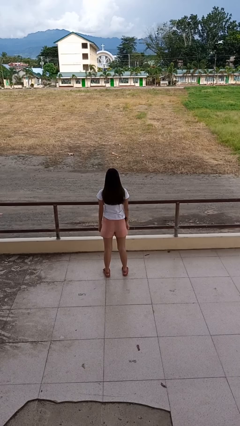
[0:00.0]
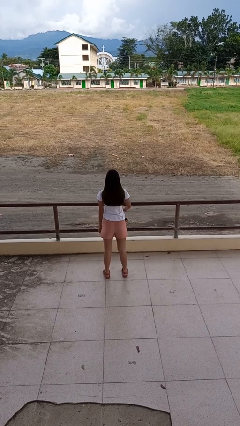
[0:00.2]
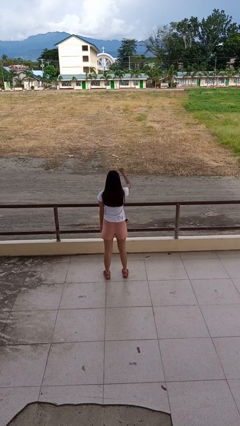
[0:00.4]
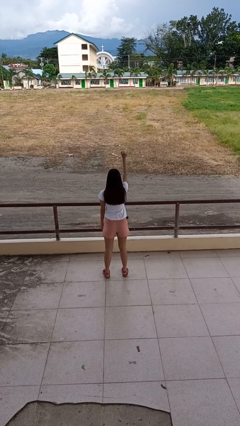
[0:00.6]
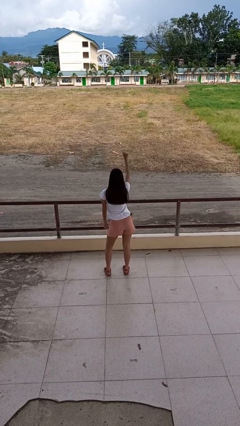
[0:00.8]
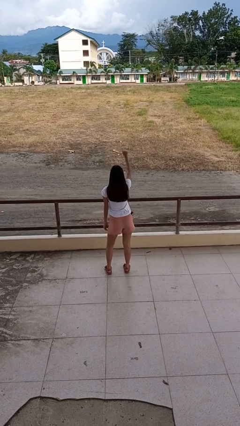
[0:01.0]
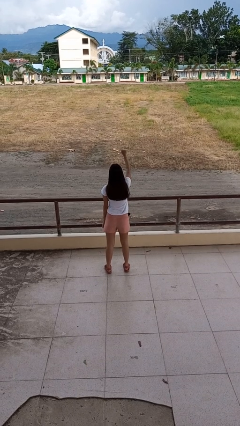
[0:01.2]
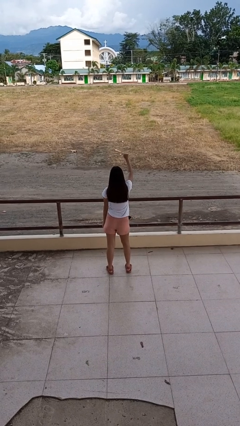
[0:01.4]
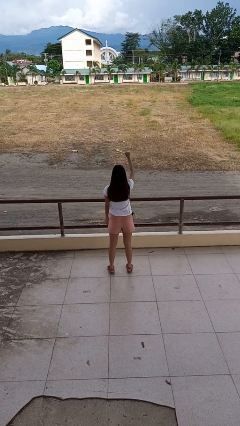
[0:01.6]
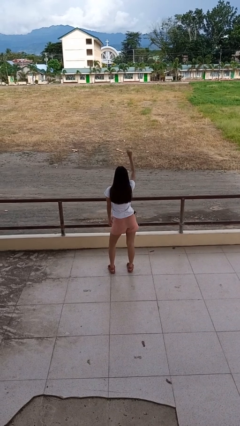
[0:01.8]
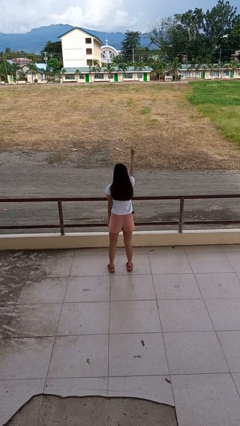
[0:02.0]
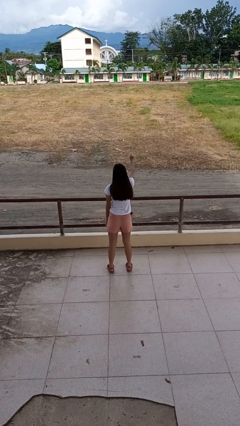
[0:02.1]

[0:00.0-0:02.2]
person dances in place

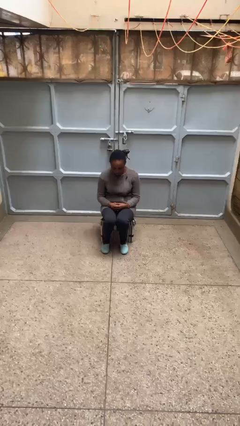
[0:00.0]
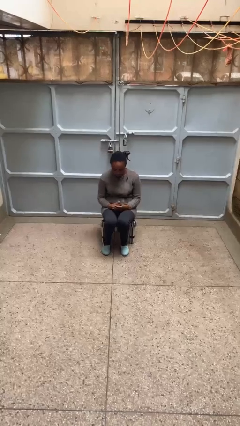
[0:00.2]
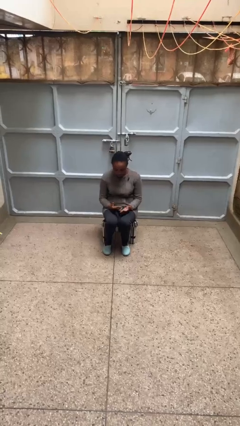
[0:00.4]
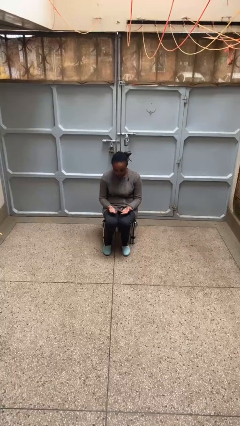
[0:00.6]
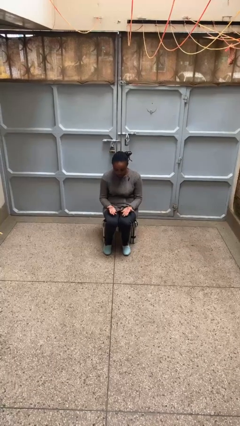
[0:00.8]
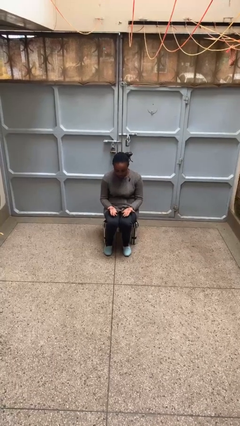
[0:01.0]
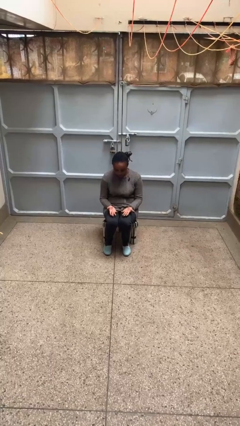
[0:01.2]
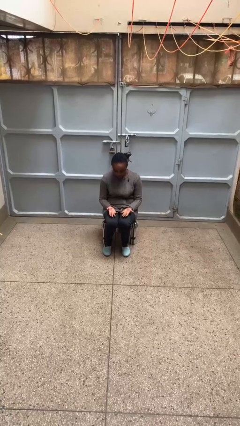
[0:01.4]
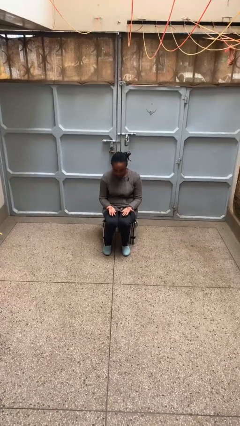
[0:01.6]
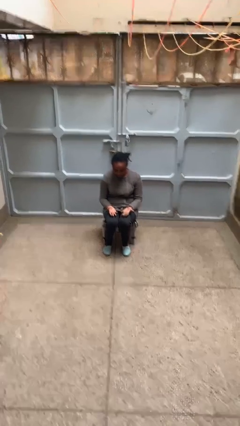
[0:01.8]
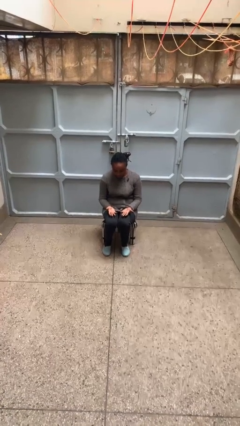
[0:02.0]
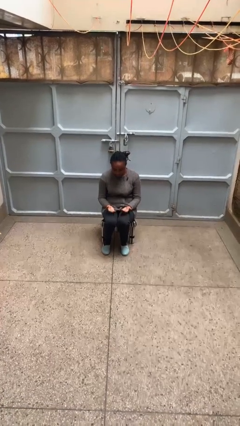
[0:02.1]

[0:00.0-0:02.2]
person looks at hands in lap

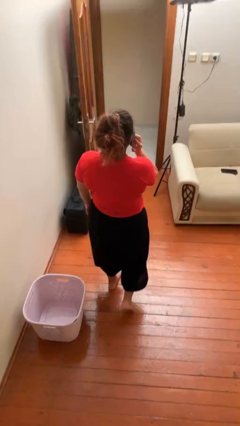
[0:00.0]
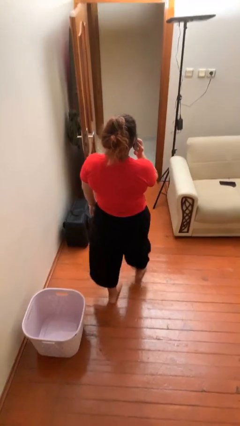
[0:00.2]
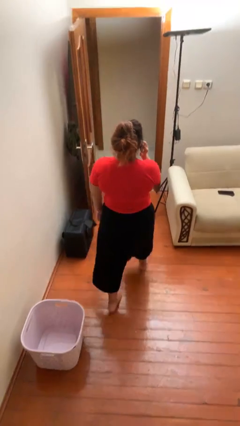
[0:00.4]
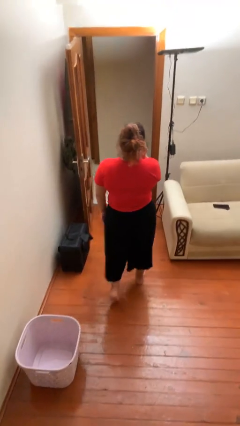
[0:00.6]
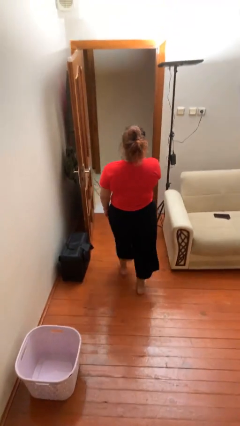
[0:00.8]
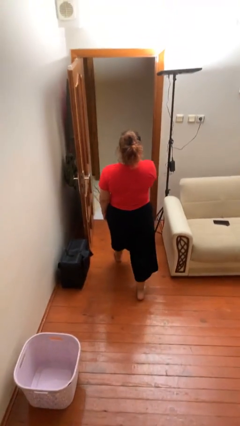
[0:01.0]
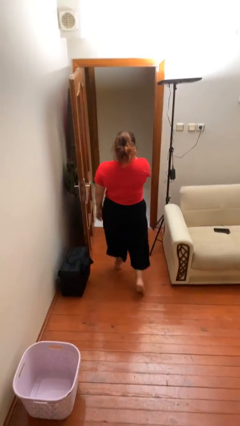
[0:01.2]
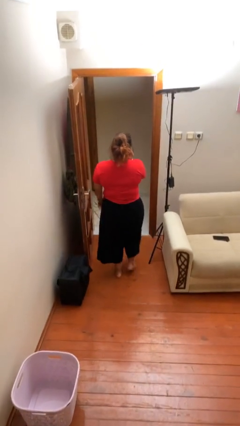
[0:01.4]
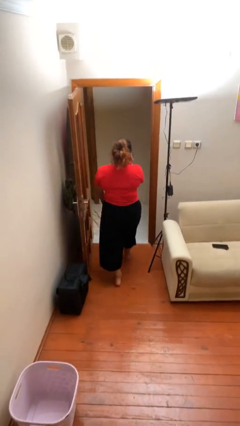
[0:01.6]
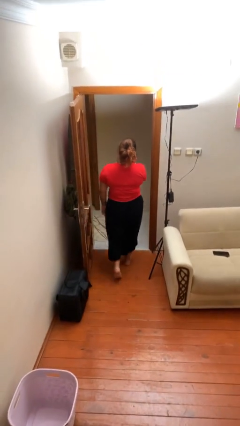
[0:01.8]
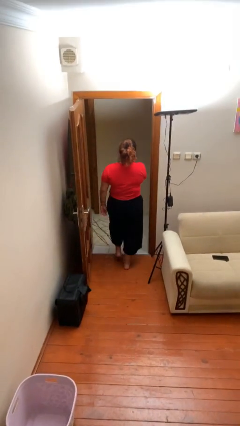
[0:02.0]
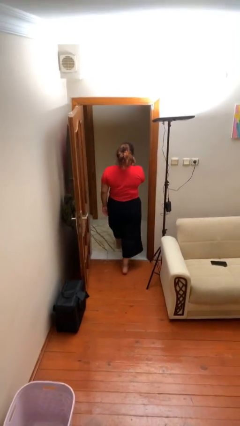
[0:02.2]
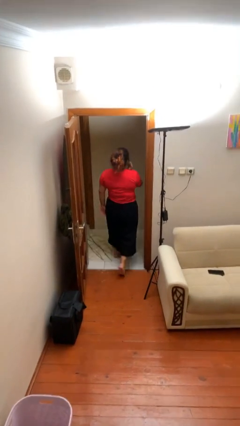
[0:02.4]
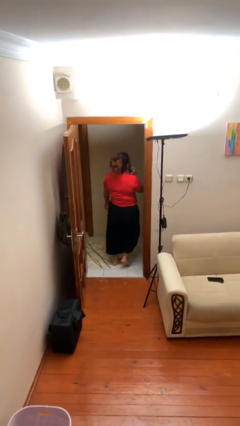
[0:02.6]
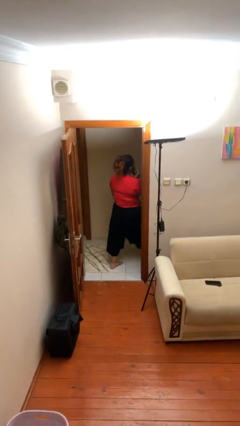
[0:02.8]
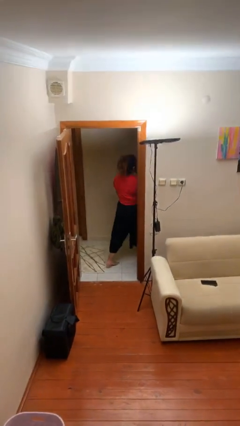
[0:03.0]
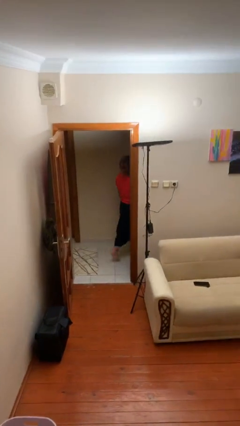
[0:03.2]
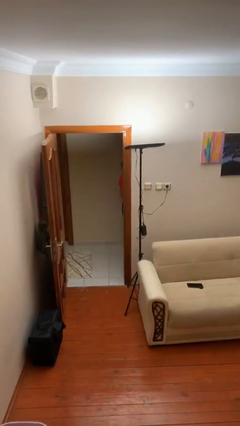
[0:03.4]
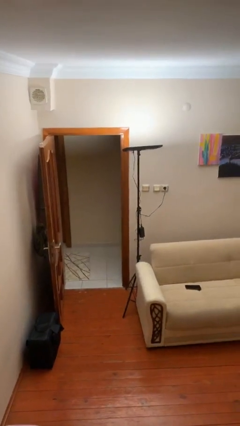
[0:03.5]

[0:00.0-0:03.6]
person exits scene through structure

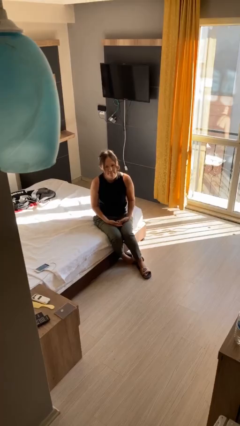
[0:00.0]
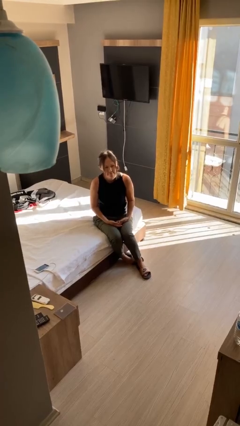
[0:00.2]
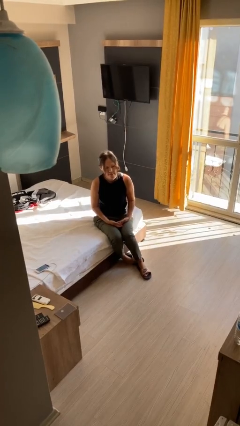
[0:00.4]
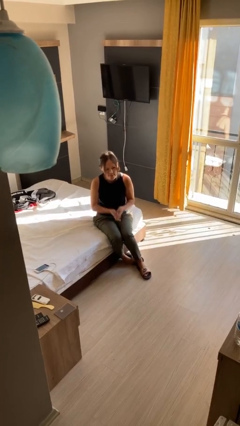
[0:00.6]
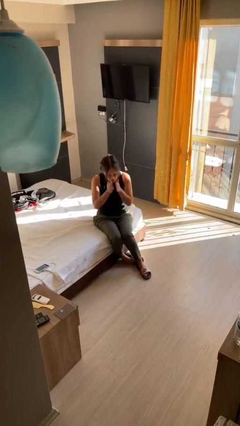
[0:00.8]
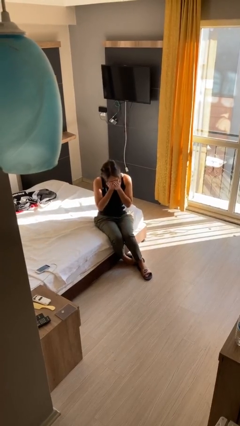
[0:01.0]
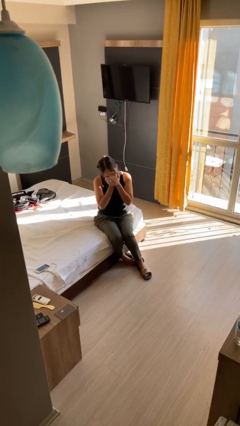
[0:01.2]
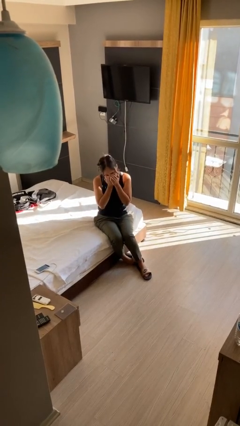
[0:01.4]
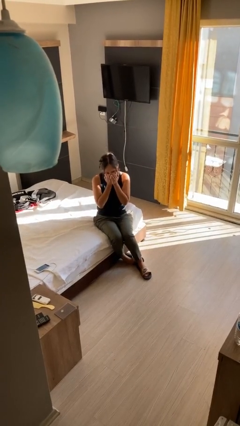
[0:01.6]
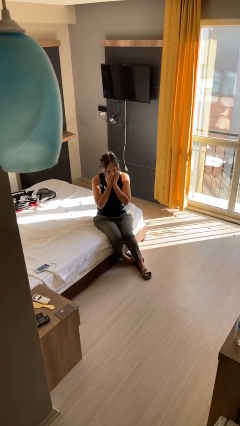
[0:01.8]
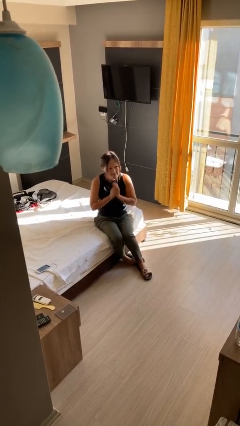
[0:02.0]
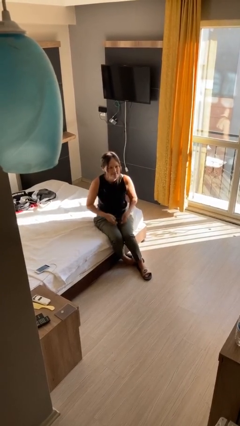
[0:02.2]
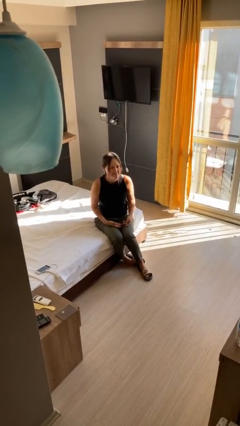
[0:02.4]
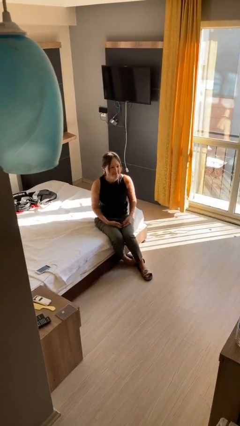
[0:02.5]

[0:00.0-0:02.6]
person sneezes into hand

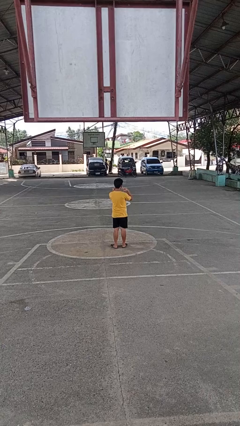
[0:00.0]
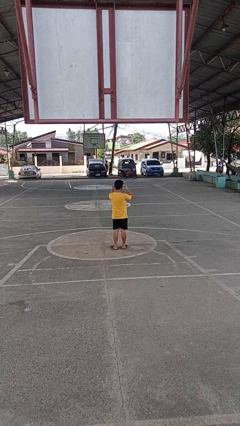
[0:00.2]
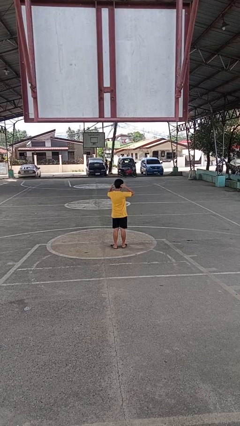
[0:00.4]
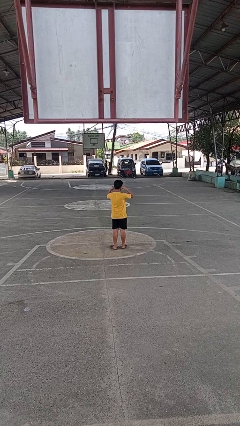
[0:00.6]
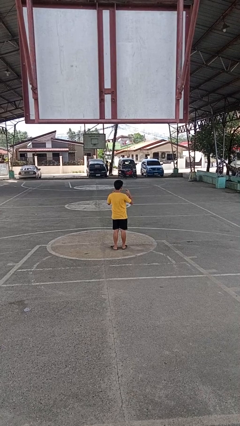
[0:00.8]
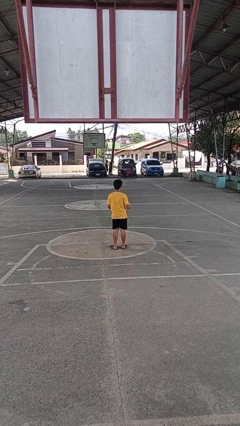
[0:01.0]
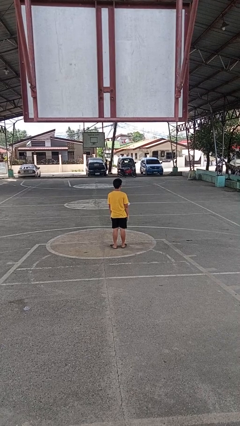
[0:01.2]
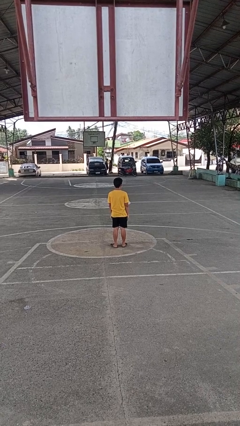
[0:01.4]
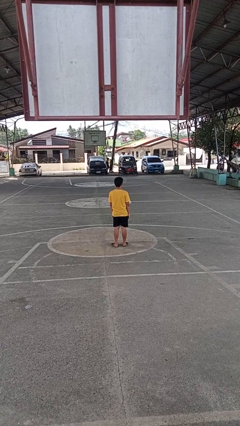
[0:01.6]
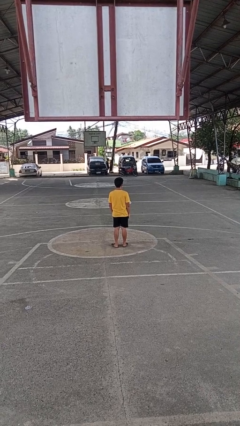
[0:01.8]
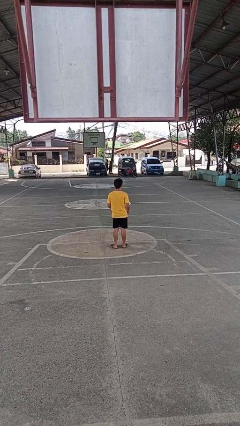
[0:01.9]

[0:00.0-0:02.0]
person puts on facemask

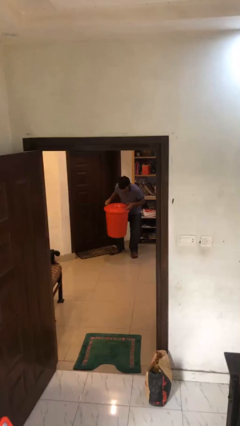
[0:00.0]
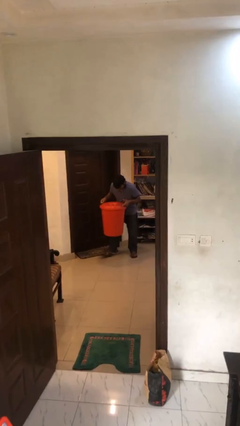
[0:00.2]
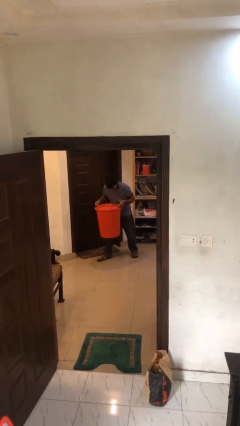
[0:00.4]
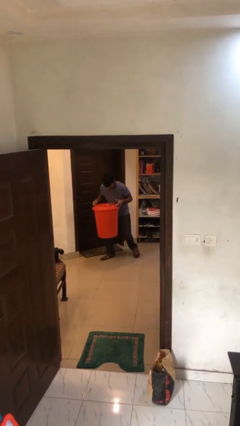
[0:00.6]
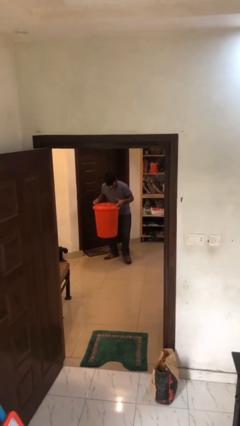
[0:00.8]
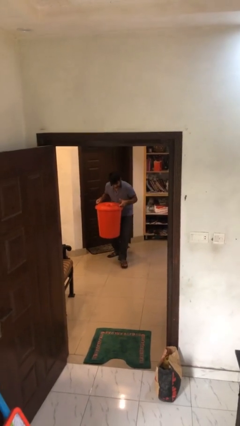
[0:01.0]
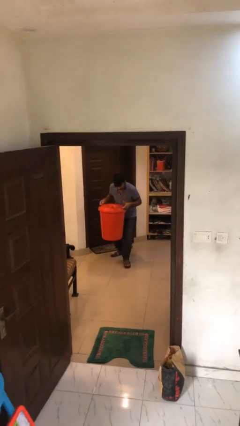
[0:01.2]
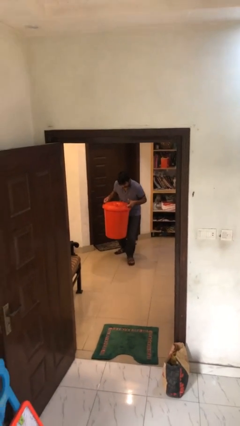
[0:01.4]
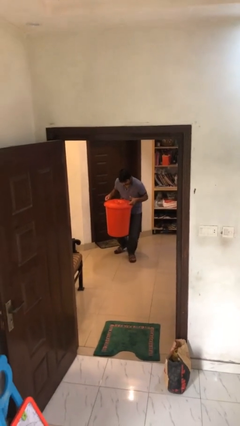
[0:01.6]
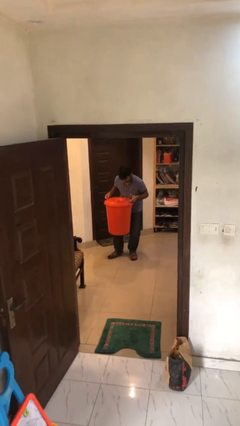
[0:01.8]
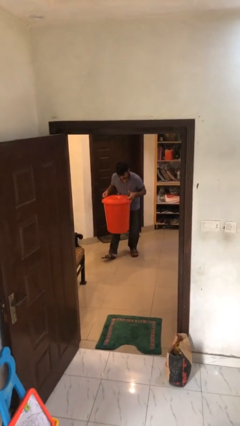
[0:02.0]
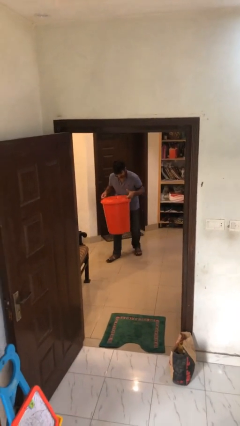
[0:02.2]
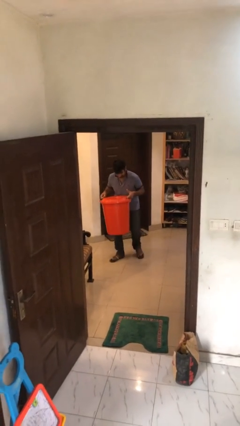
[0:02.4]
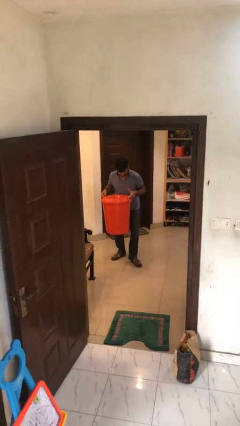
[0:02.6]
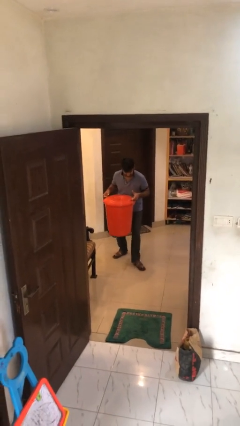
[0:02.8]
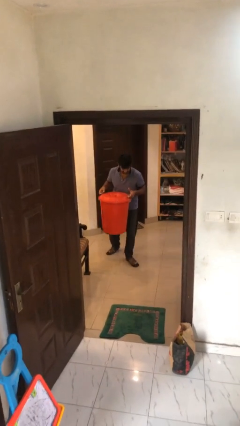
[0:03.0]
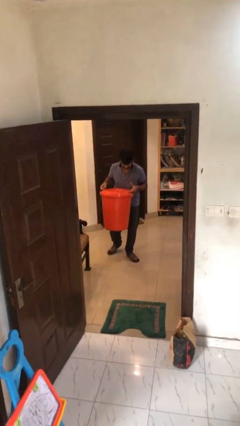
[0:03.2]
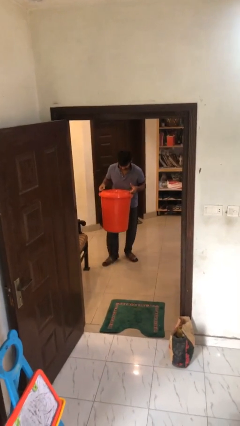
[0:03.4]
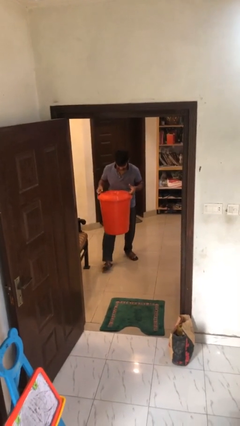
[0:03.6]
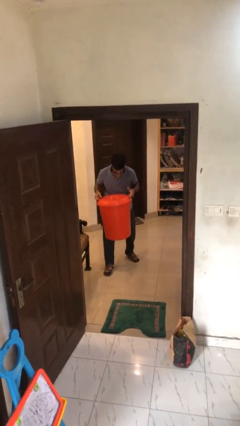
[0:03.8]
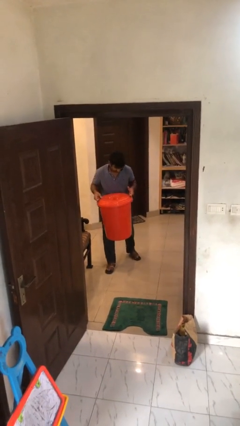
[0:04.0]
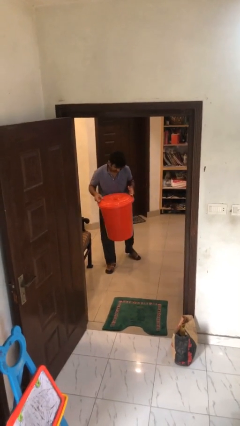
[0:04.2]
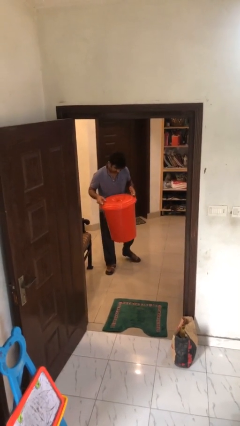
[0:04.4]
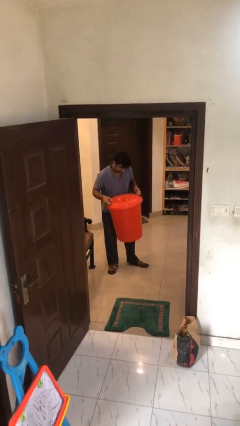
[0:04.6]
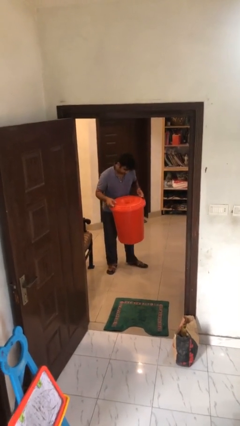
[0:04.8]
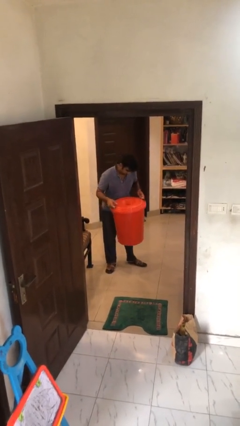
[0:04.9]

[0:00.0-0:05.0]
person carries heavy object
